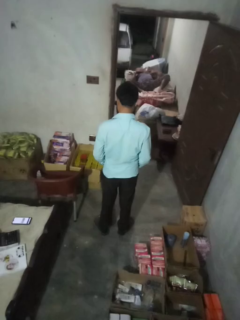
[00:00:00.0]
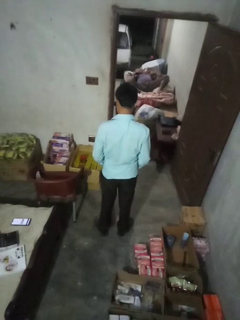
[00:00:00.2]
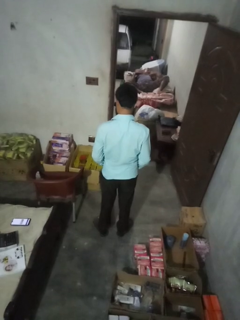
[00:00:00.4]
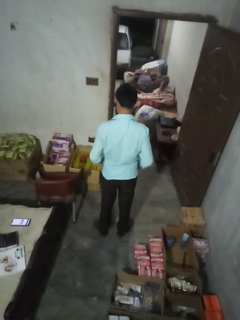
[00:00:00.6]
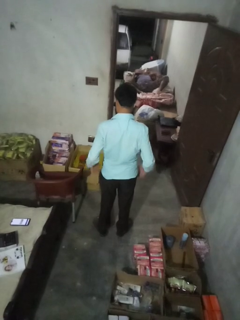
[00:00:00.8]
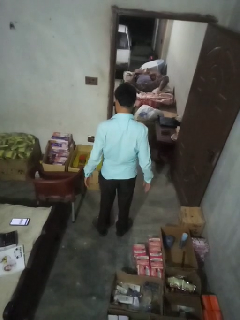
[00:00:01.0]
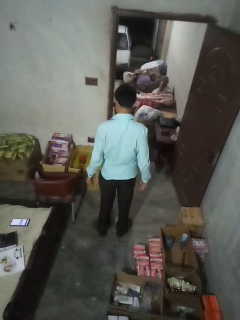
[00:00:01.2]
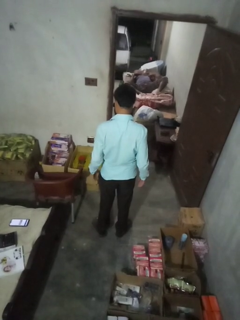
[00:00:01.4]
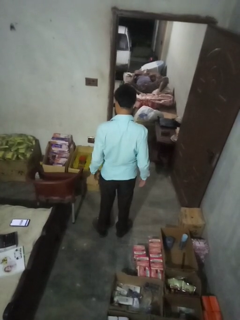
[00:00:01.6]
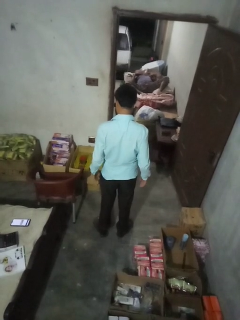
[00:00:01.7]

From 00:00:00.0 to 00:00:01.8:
person puts hands in back pockets

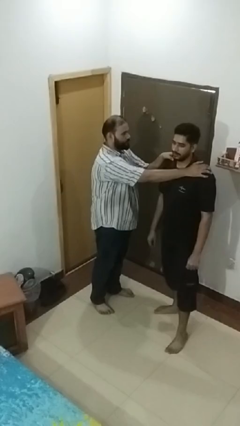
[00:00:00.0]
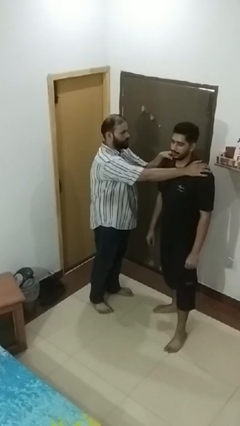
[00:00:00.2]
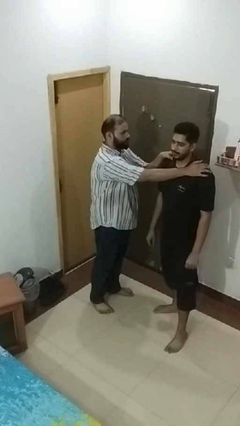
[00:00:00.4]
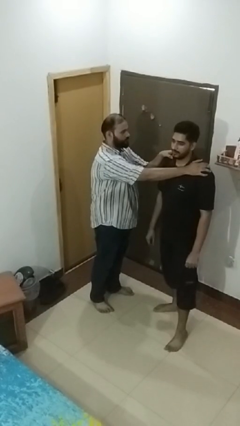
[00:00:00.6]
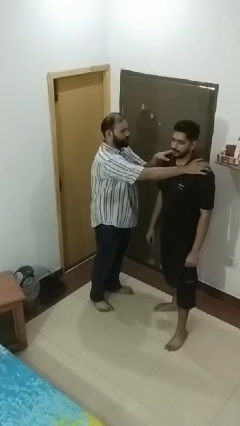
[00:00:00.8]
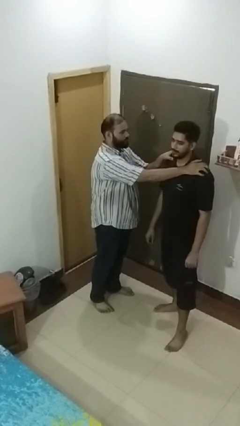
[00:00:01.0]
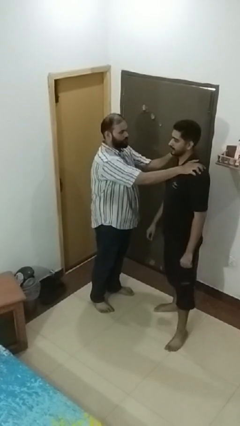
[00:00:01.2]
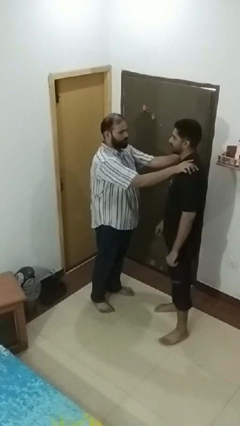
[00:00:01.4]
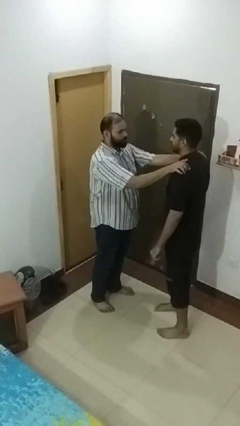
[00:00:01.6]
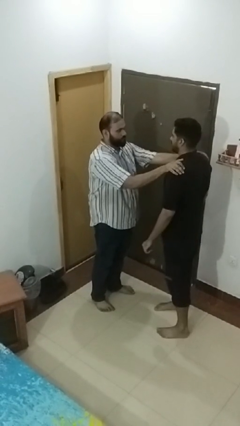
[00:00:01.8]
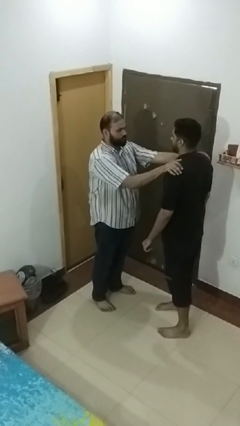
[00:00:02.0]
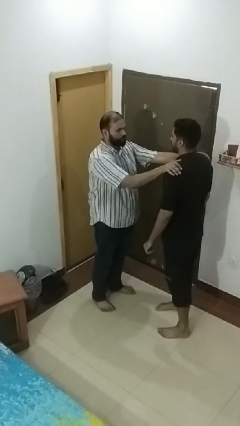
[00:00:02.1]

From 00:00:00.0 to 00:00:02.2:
person spins person around

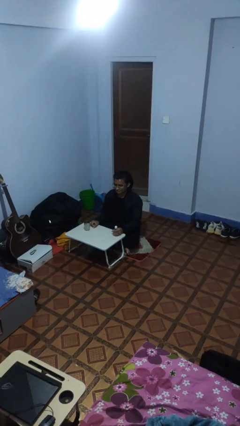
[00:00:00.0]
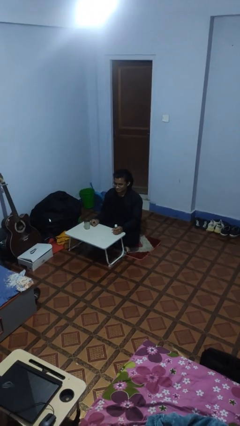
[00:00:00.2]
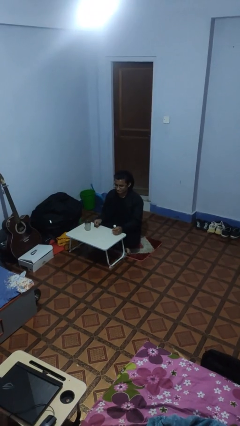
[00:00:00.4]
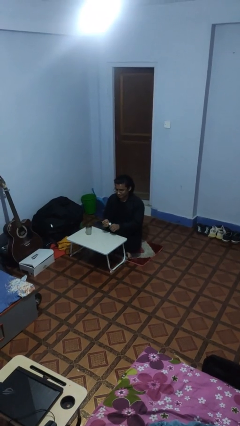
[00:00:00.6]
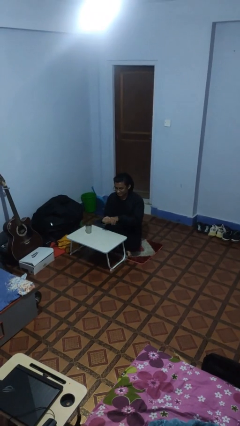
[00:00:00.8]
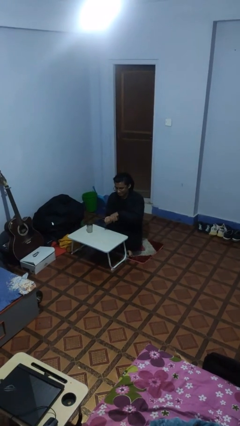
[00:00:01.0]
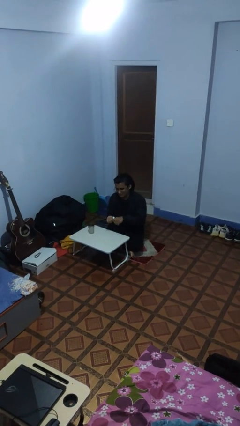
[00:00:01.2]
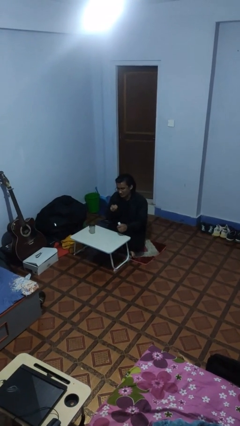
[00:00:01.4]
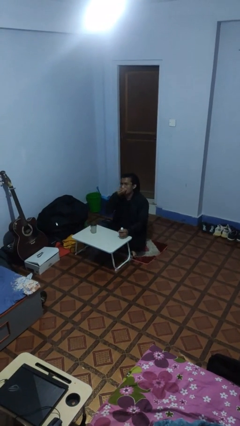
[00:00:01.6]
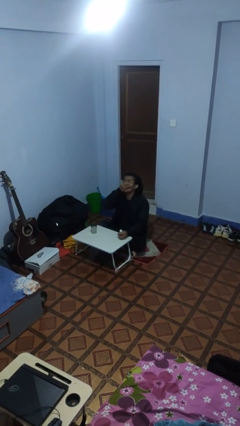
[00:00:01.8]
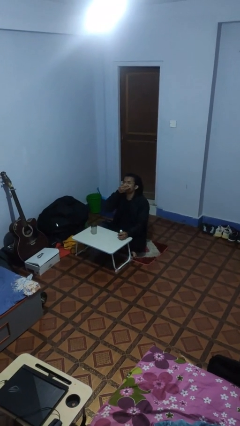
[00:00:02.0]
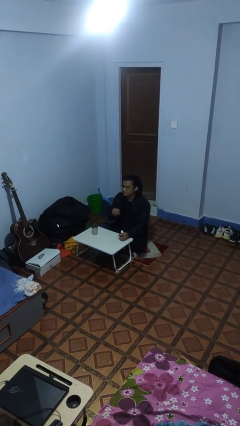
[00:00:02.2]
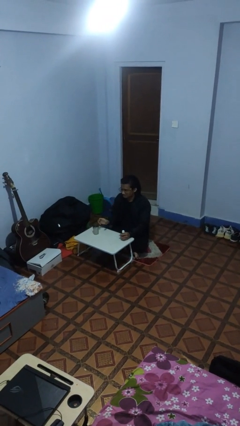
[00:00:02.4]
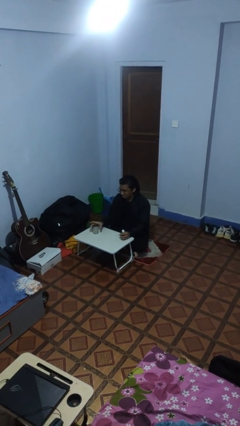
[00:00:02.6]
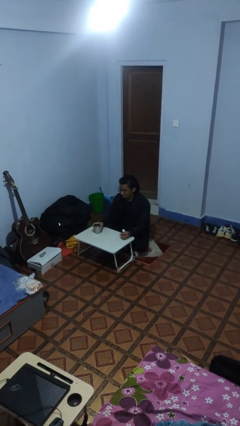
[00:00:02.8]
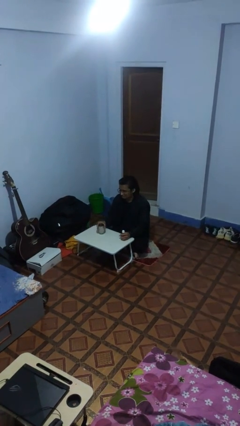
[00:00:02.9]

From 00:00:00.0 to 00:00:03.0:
person takes medicine pills

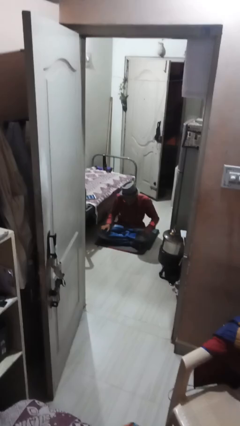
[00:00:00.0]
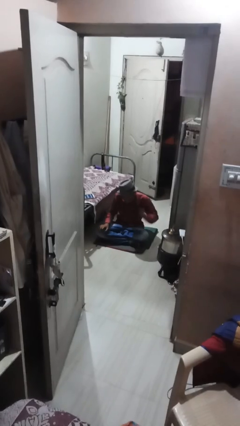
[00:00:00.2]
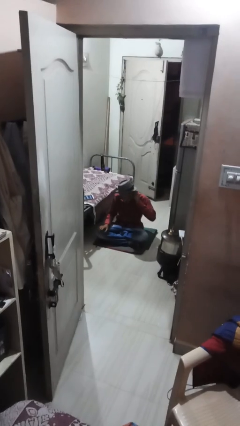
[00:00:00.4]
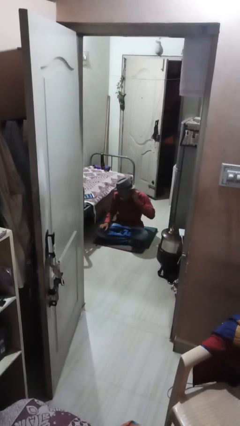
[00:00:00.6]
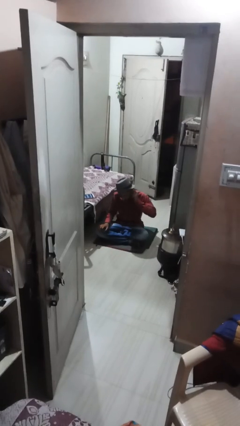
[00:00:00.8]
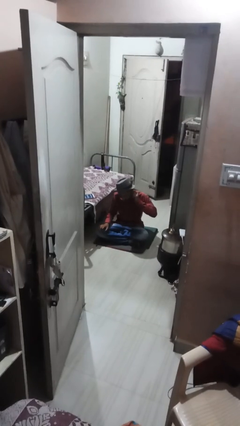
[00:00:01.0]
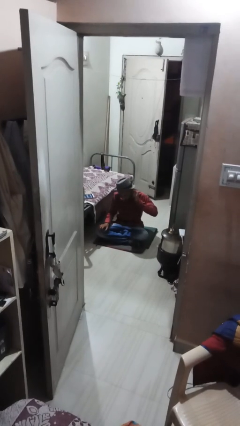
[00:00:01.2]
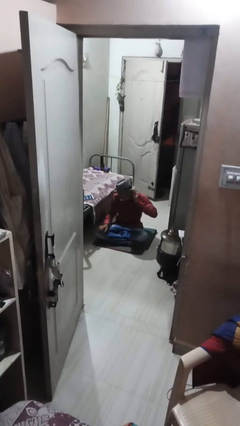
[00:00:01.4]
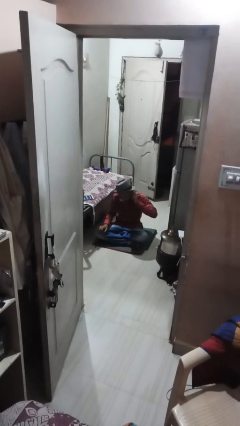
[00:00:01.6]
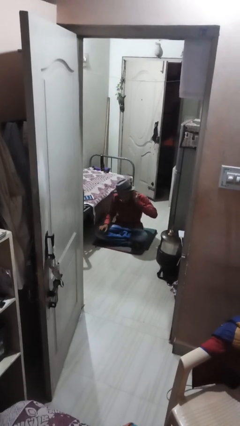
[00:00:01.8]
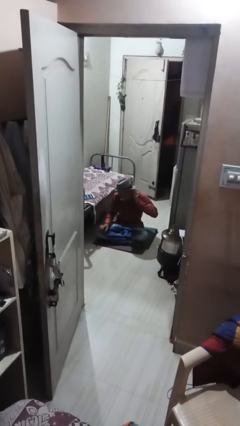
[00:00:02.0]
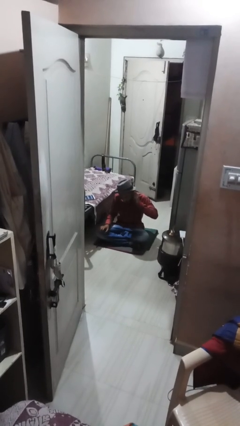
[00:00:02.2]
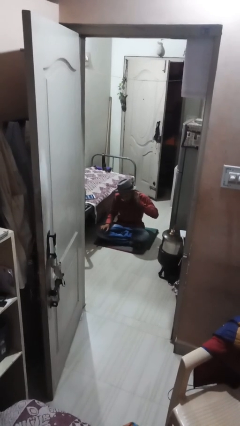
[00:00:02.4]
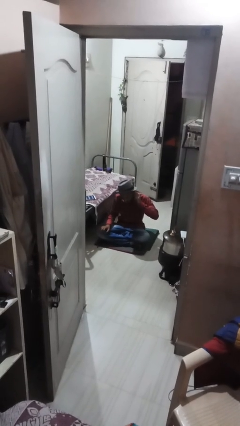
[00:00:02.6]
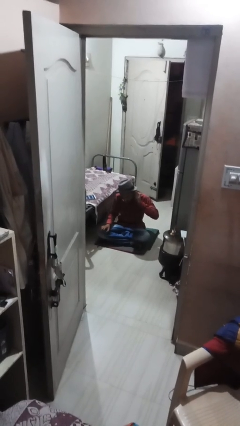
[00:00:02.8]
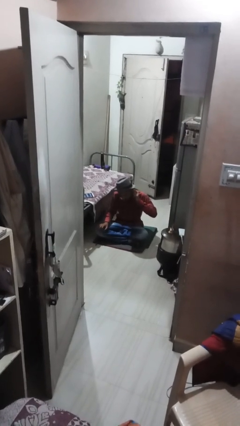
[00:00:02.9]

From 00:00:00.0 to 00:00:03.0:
person touches earlobe

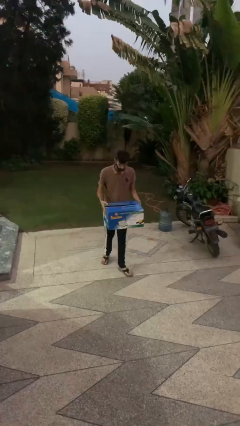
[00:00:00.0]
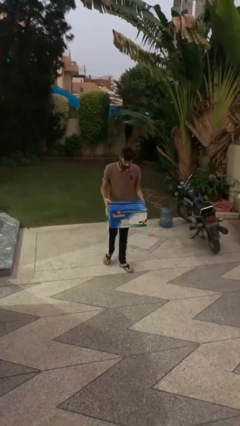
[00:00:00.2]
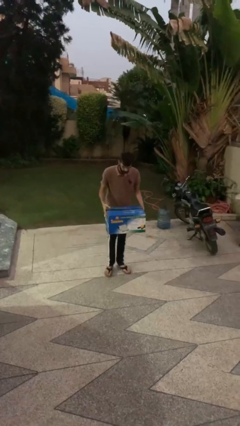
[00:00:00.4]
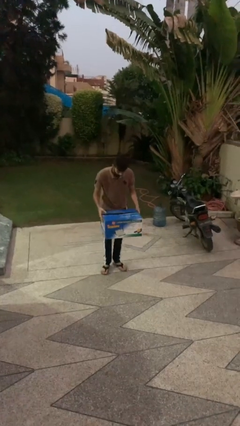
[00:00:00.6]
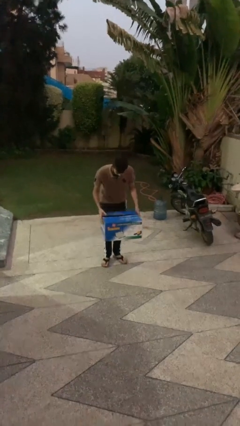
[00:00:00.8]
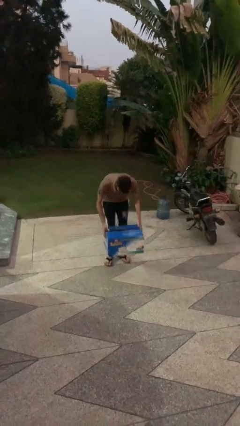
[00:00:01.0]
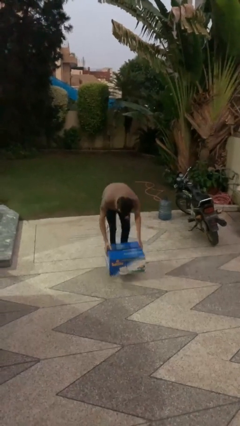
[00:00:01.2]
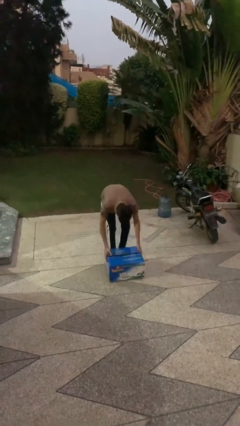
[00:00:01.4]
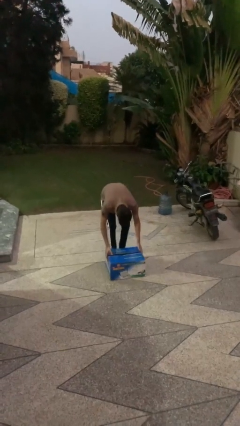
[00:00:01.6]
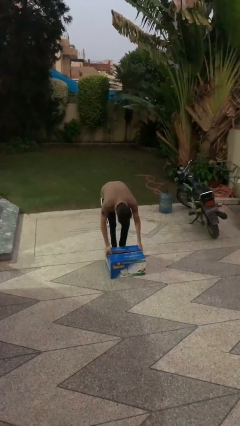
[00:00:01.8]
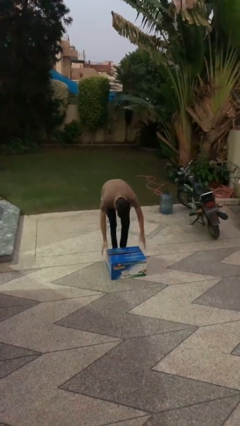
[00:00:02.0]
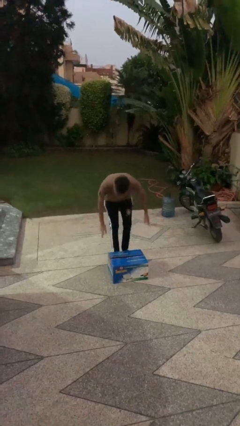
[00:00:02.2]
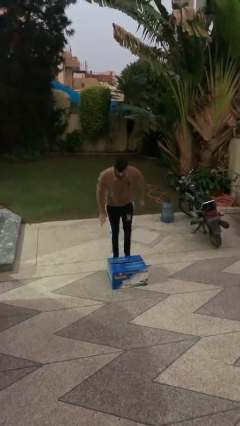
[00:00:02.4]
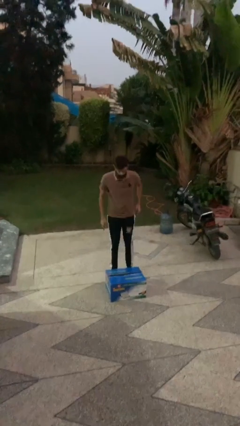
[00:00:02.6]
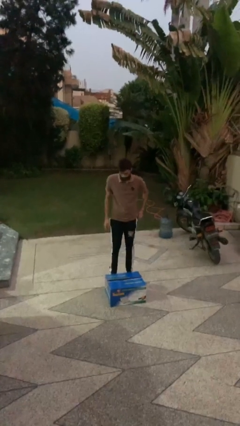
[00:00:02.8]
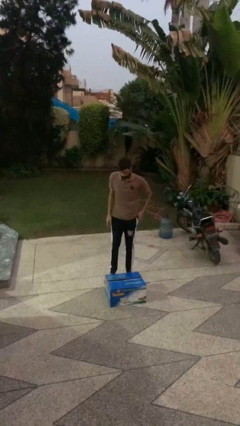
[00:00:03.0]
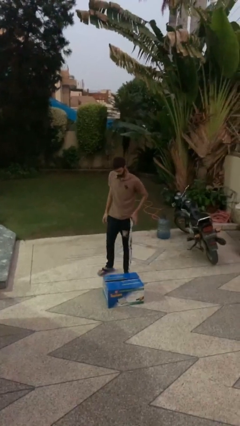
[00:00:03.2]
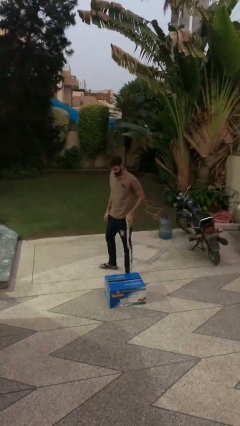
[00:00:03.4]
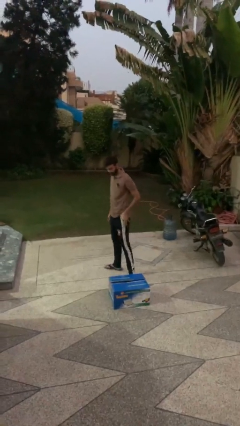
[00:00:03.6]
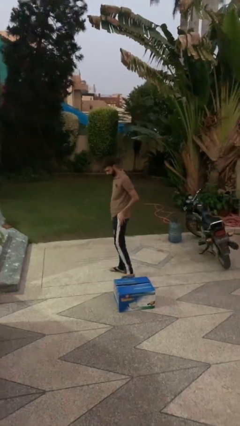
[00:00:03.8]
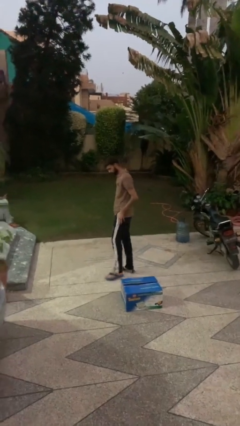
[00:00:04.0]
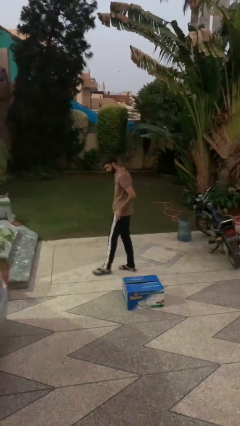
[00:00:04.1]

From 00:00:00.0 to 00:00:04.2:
person puts down object on floor

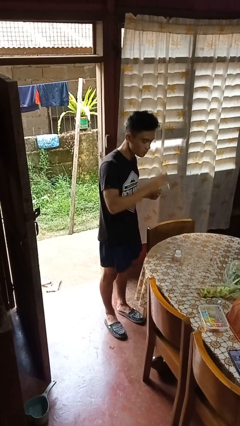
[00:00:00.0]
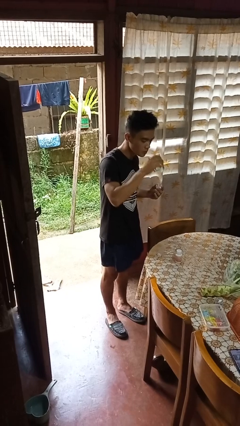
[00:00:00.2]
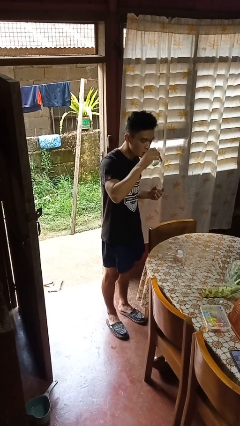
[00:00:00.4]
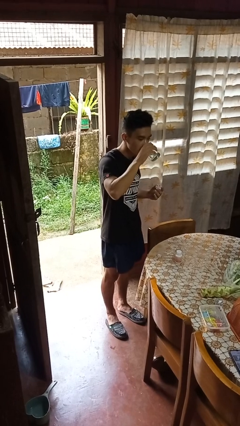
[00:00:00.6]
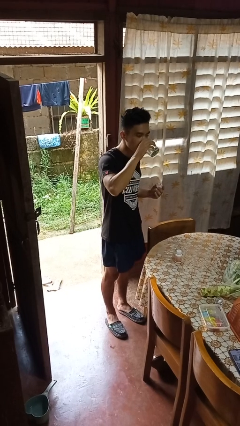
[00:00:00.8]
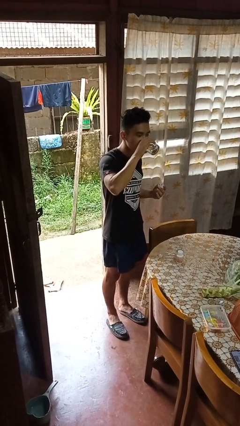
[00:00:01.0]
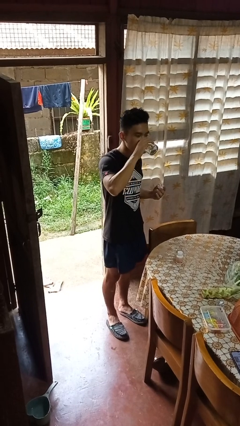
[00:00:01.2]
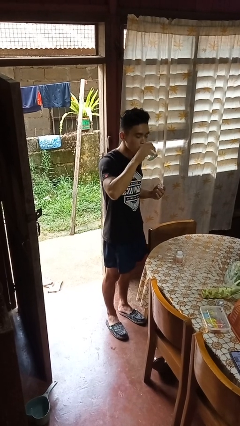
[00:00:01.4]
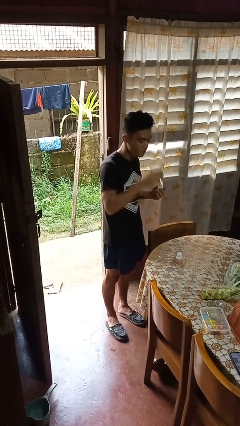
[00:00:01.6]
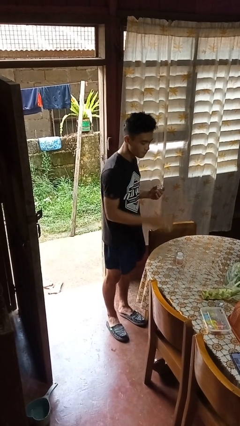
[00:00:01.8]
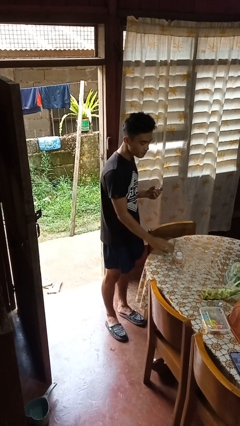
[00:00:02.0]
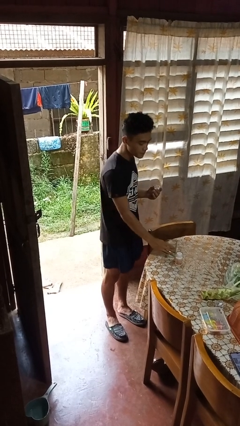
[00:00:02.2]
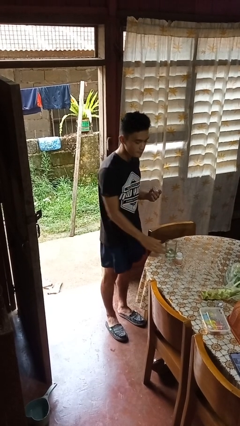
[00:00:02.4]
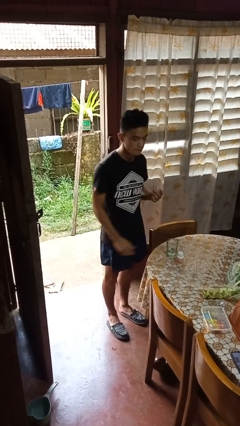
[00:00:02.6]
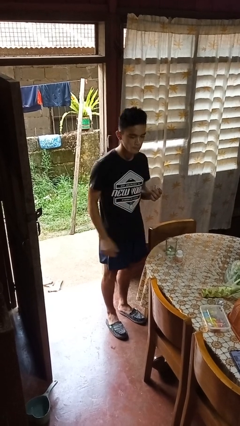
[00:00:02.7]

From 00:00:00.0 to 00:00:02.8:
person drinks from cup

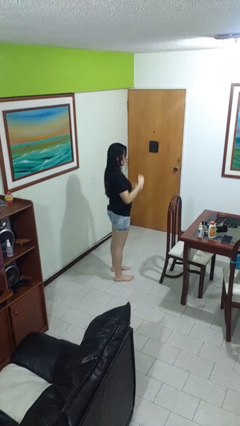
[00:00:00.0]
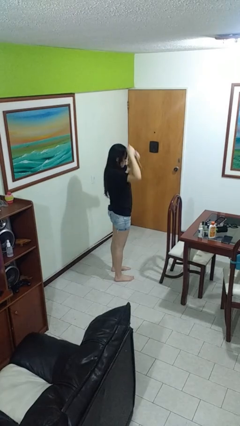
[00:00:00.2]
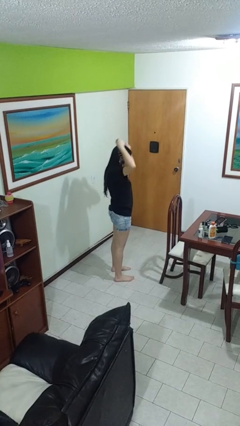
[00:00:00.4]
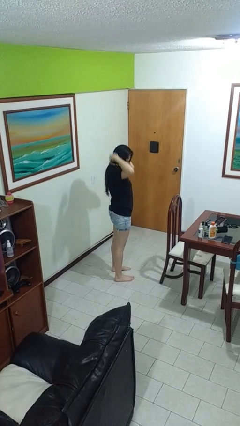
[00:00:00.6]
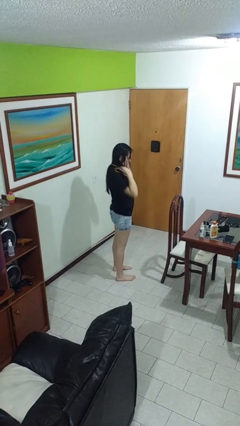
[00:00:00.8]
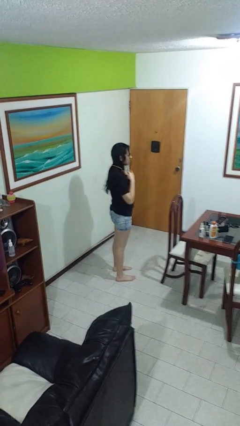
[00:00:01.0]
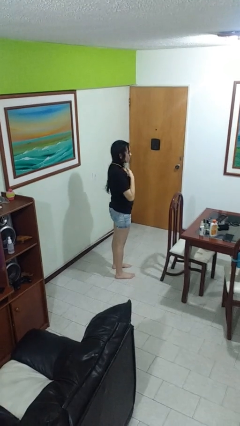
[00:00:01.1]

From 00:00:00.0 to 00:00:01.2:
person puts on necklace
